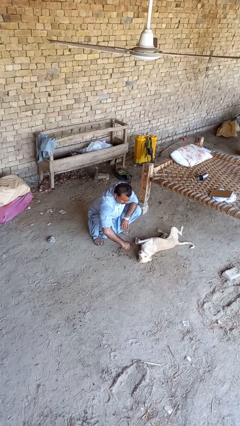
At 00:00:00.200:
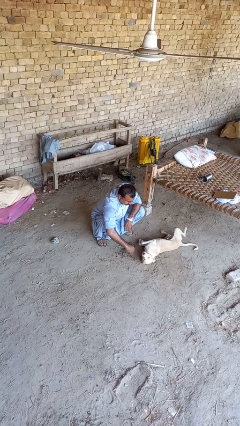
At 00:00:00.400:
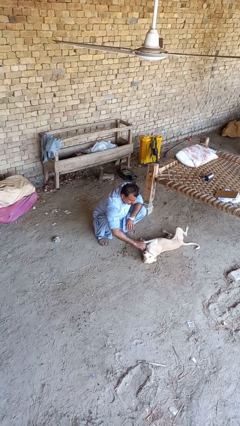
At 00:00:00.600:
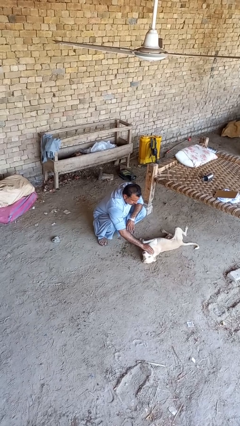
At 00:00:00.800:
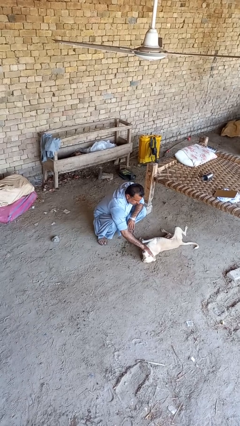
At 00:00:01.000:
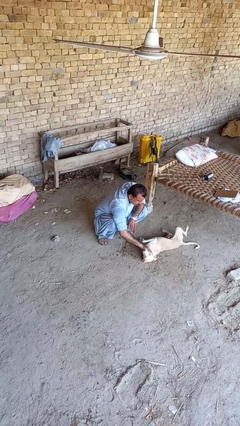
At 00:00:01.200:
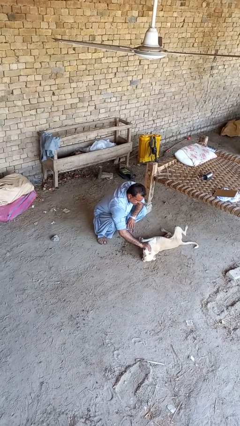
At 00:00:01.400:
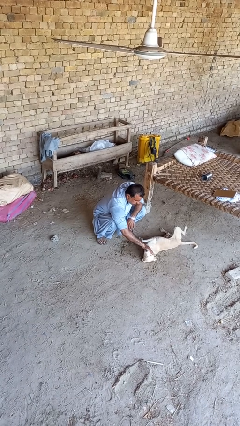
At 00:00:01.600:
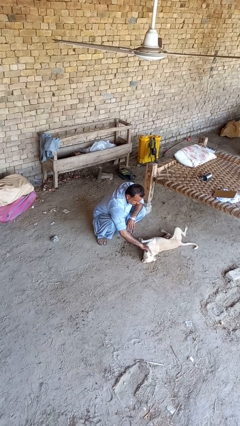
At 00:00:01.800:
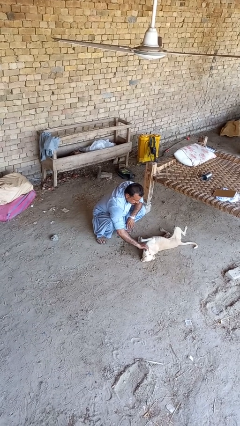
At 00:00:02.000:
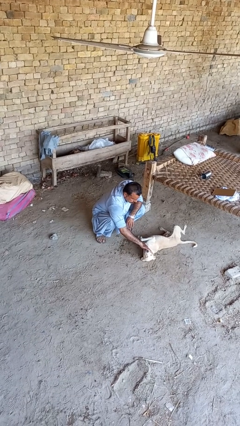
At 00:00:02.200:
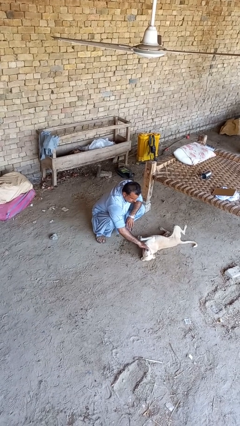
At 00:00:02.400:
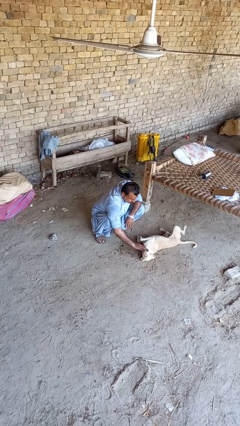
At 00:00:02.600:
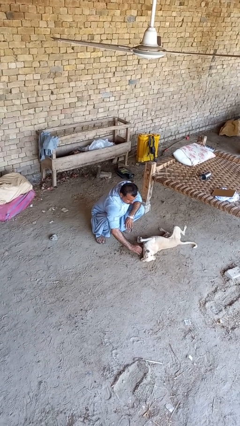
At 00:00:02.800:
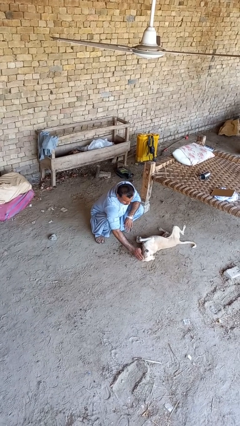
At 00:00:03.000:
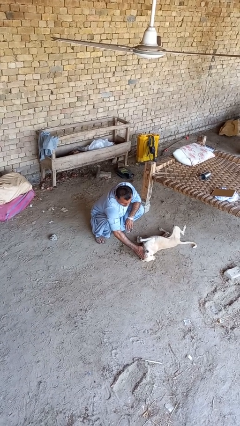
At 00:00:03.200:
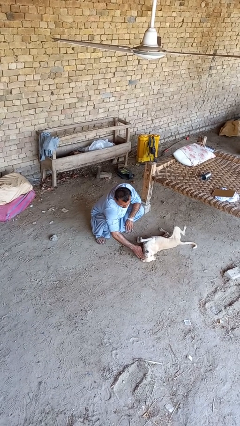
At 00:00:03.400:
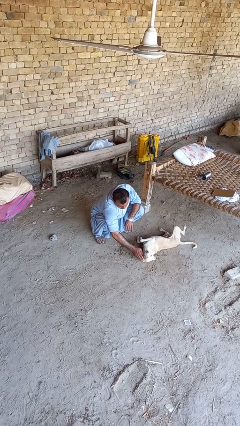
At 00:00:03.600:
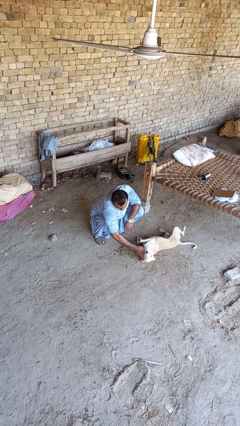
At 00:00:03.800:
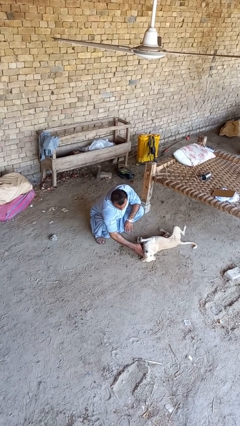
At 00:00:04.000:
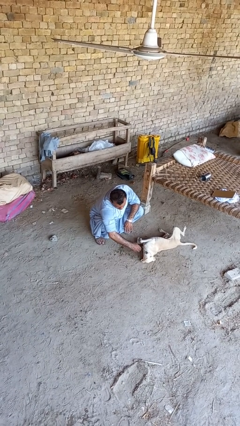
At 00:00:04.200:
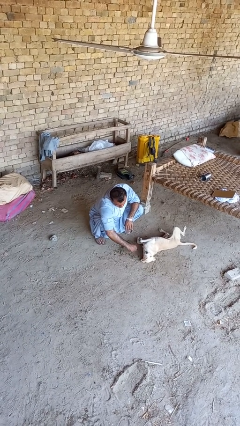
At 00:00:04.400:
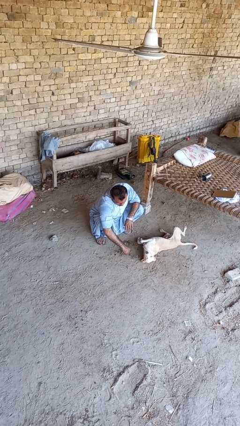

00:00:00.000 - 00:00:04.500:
person pets dog

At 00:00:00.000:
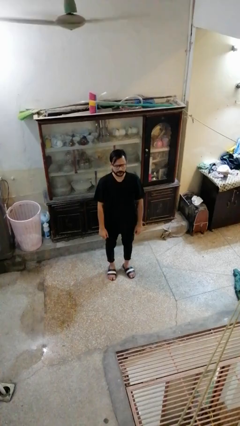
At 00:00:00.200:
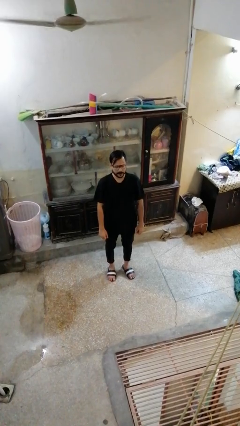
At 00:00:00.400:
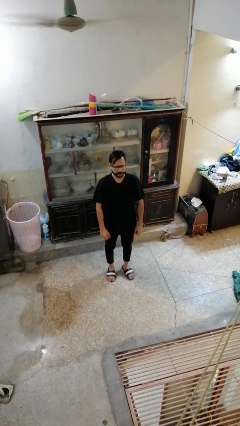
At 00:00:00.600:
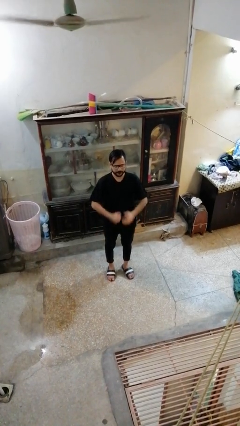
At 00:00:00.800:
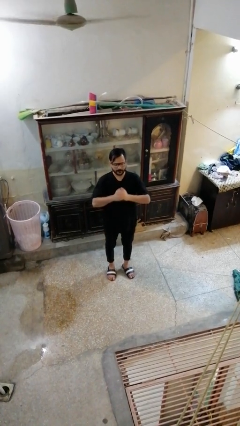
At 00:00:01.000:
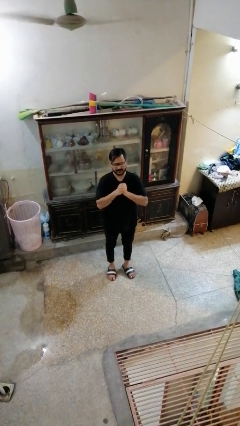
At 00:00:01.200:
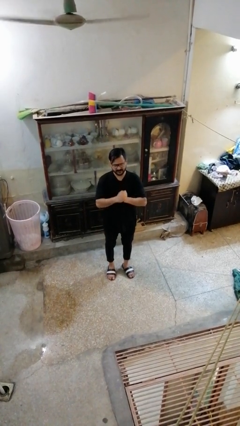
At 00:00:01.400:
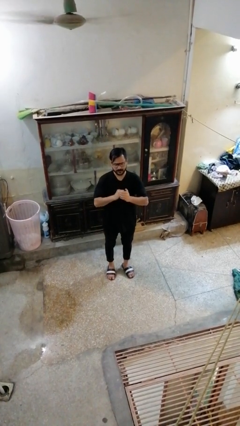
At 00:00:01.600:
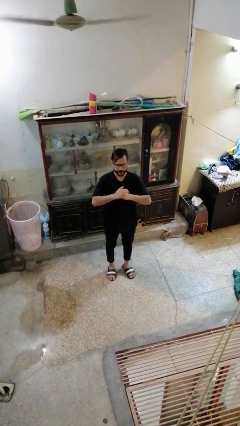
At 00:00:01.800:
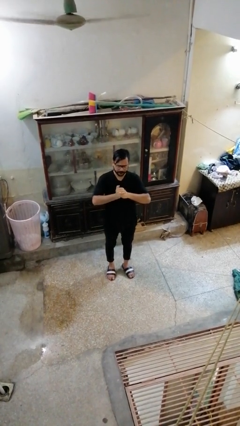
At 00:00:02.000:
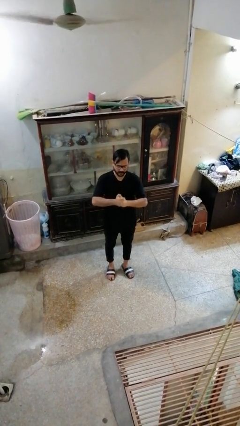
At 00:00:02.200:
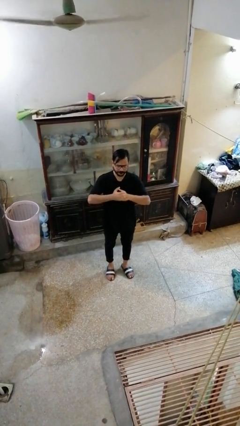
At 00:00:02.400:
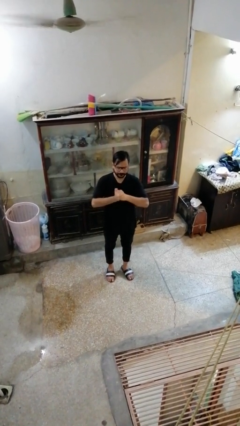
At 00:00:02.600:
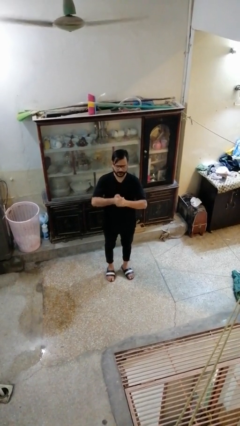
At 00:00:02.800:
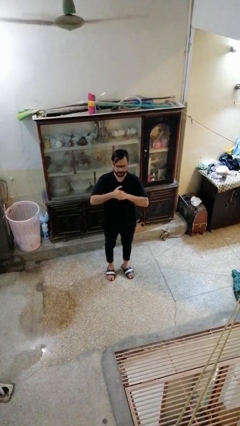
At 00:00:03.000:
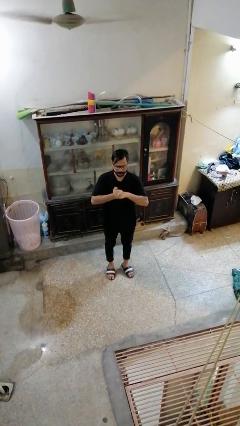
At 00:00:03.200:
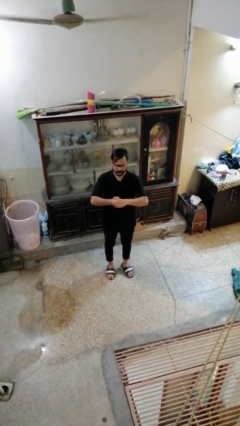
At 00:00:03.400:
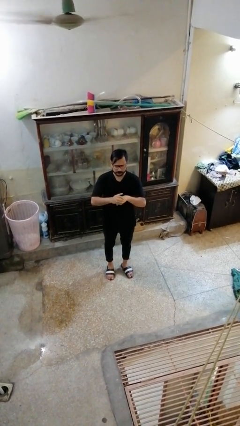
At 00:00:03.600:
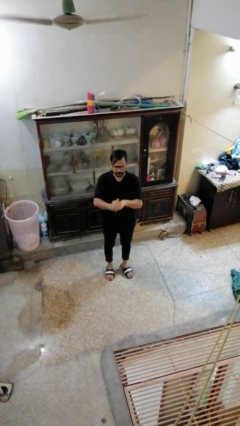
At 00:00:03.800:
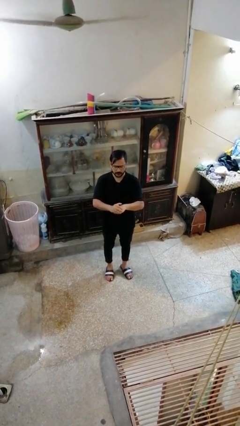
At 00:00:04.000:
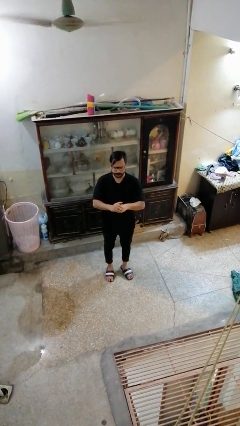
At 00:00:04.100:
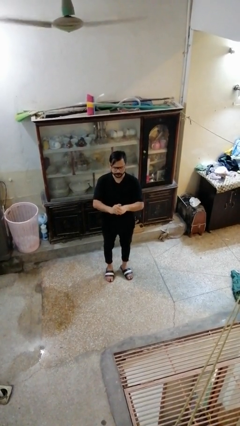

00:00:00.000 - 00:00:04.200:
person cracks knuckles

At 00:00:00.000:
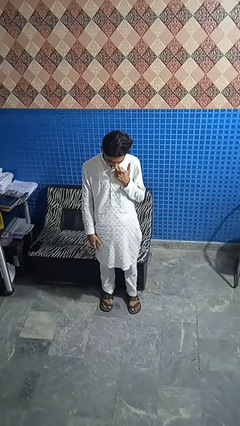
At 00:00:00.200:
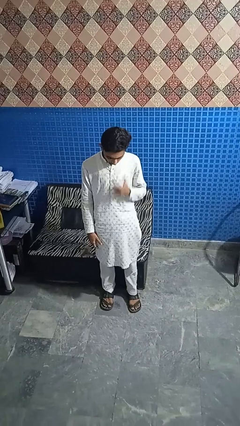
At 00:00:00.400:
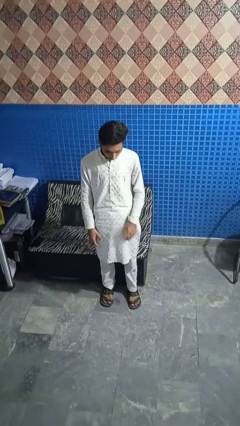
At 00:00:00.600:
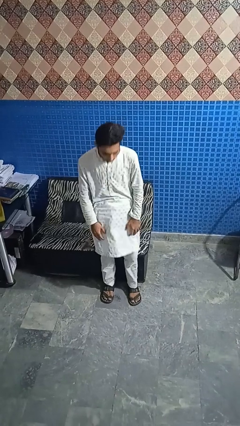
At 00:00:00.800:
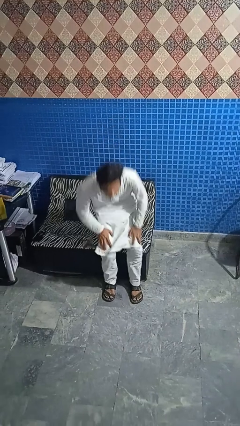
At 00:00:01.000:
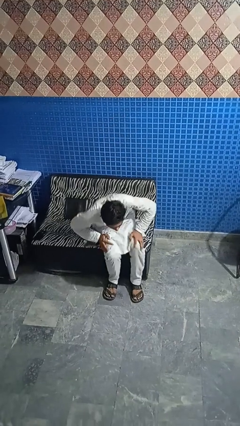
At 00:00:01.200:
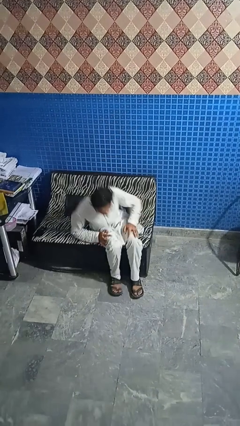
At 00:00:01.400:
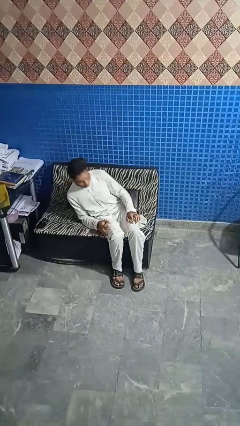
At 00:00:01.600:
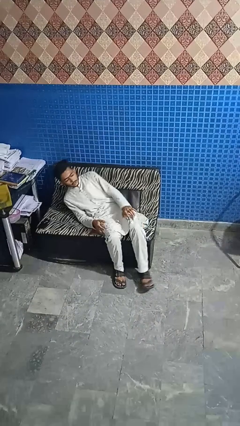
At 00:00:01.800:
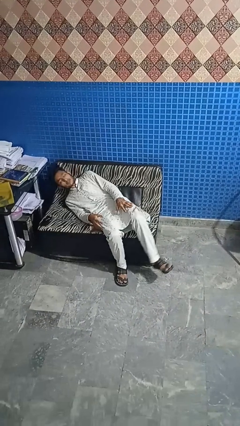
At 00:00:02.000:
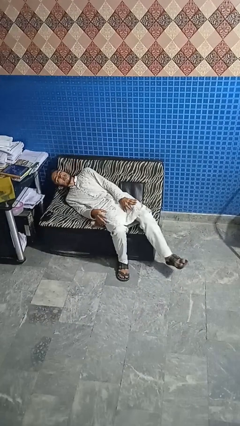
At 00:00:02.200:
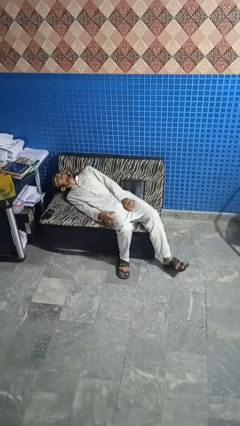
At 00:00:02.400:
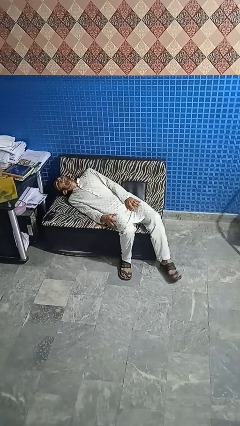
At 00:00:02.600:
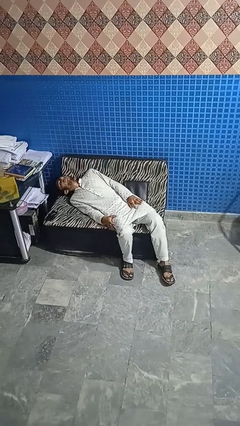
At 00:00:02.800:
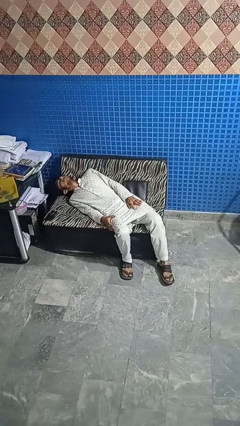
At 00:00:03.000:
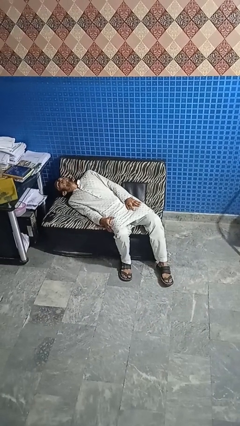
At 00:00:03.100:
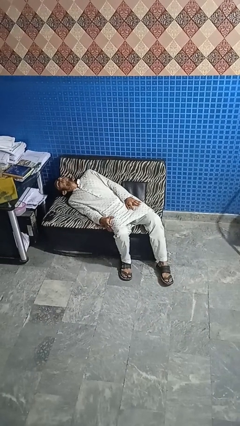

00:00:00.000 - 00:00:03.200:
person lies down on couch

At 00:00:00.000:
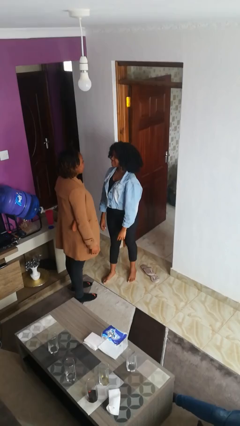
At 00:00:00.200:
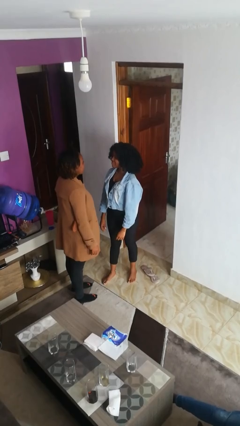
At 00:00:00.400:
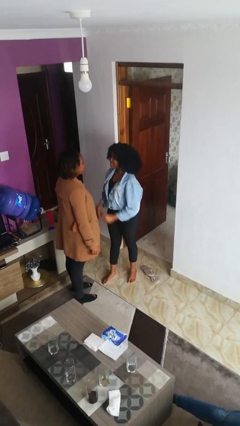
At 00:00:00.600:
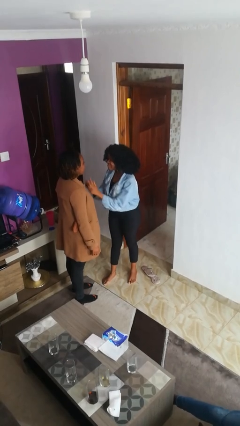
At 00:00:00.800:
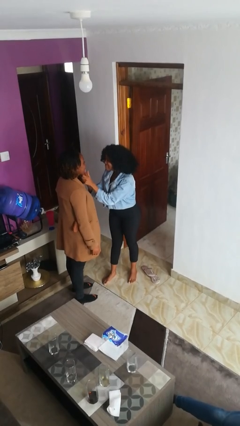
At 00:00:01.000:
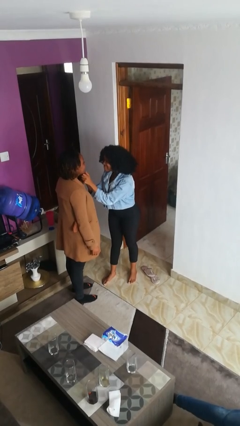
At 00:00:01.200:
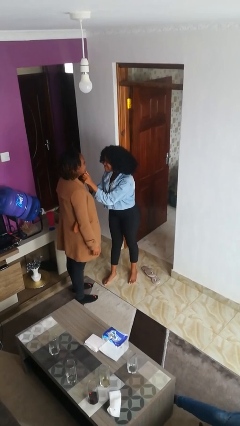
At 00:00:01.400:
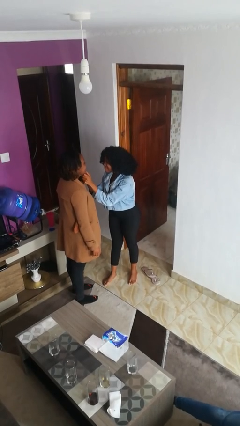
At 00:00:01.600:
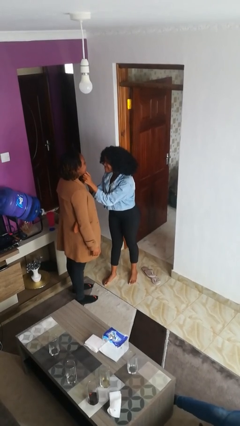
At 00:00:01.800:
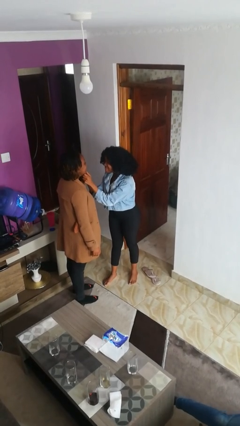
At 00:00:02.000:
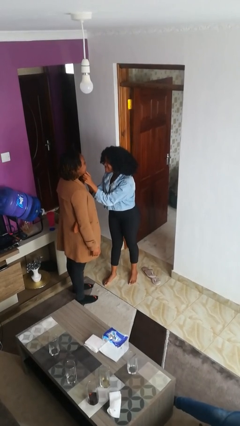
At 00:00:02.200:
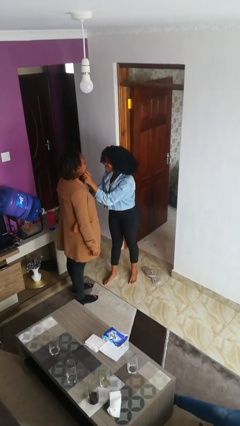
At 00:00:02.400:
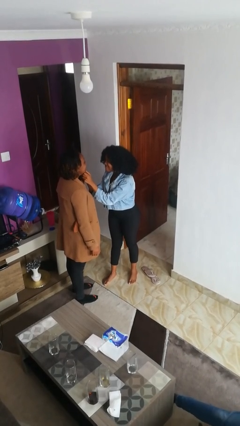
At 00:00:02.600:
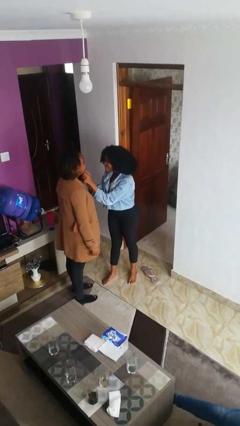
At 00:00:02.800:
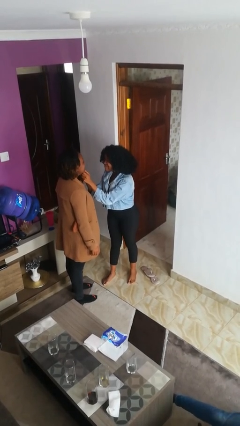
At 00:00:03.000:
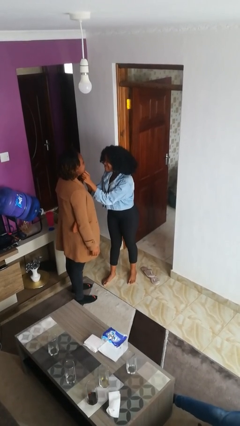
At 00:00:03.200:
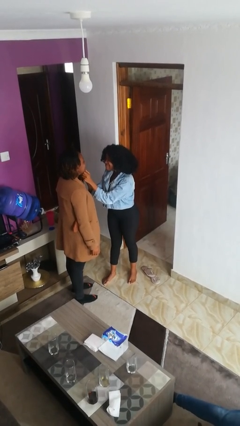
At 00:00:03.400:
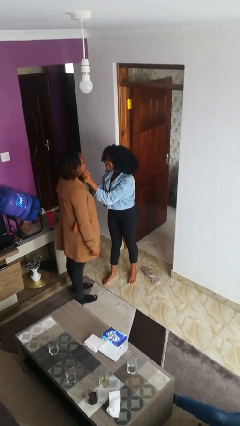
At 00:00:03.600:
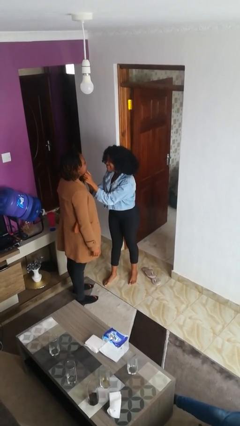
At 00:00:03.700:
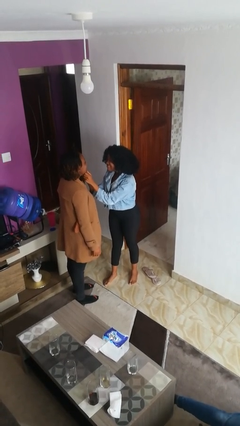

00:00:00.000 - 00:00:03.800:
person touches face of person

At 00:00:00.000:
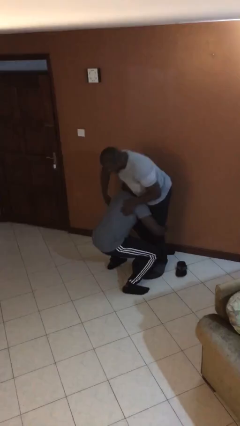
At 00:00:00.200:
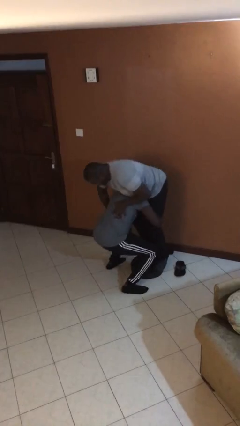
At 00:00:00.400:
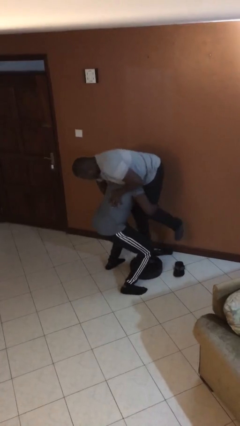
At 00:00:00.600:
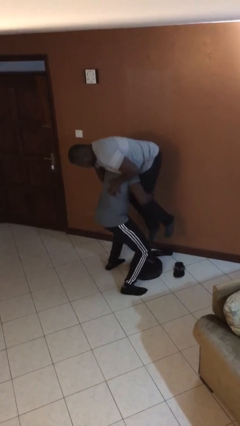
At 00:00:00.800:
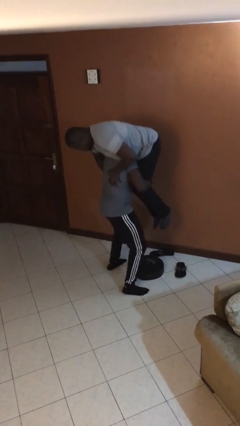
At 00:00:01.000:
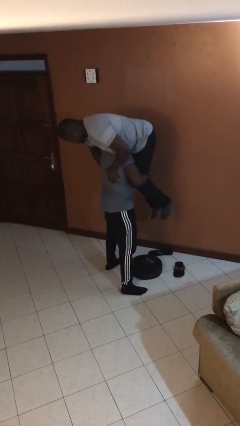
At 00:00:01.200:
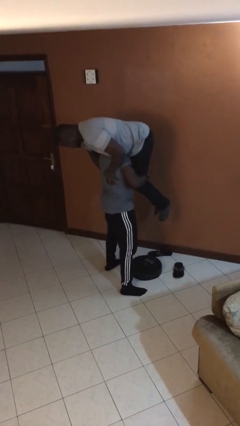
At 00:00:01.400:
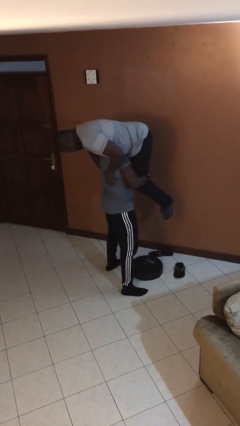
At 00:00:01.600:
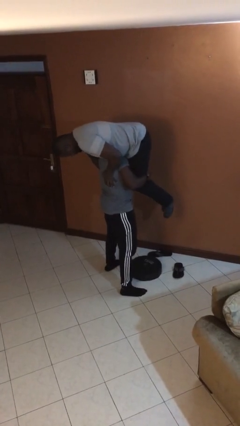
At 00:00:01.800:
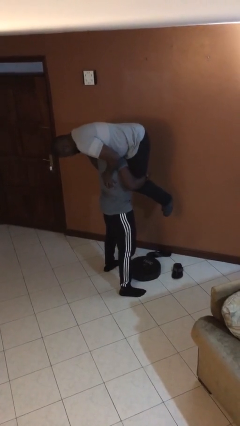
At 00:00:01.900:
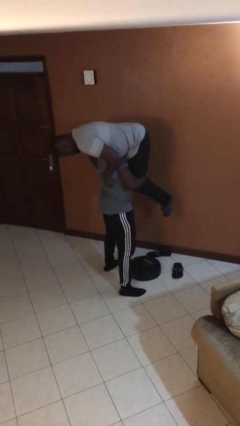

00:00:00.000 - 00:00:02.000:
person carries person over shoulder

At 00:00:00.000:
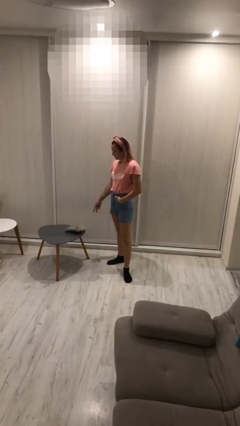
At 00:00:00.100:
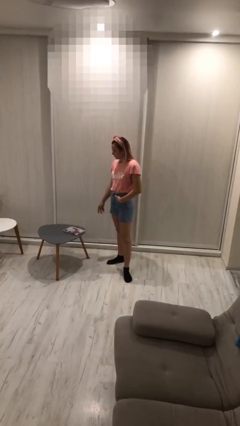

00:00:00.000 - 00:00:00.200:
person throws object on table
